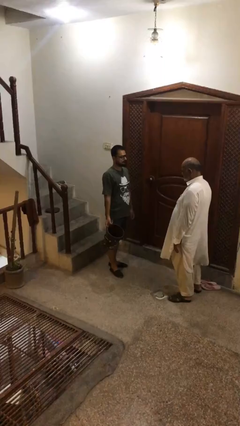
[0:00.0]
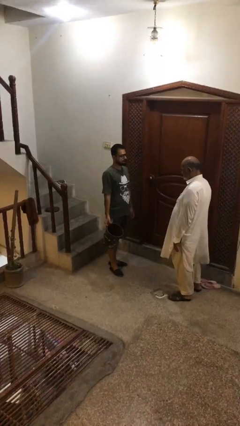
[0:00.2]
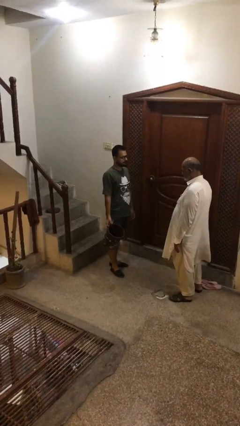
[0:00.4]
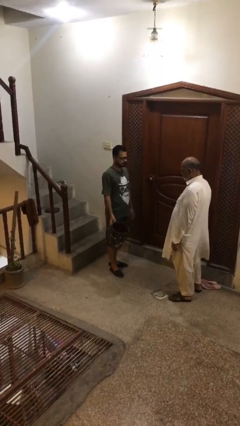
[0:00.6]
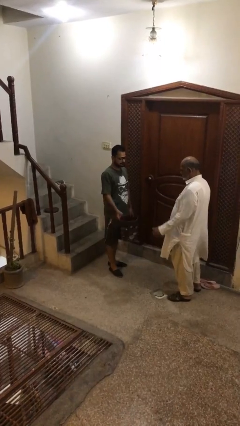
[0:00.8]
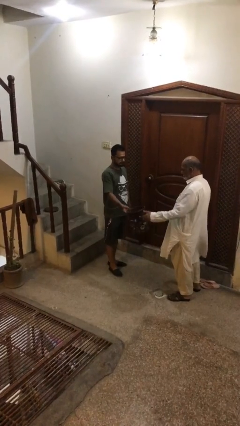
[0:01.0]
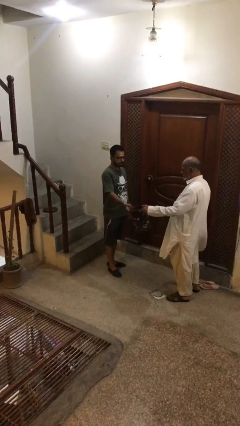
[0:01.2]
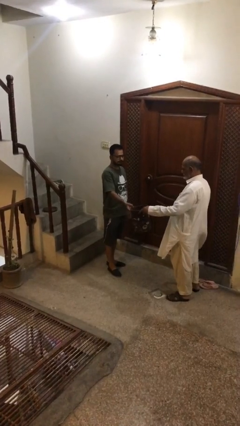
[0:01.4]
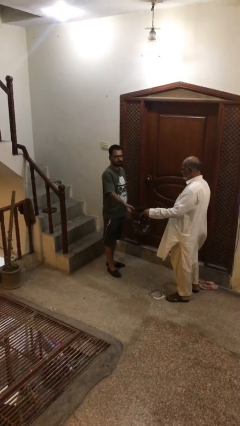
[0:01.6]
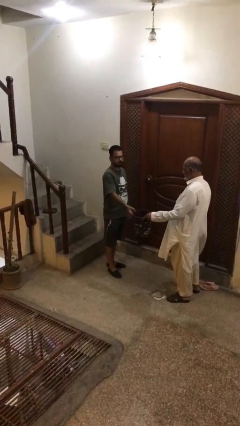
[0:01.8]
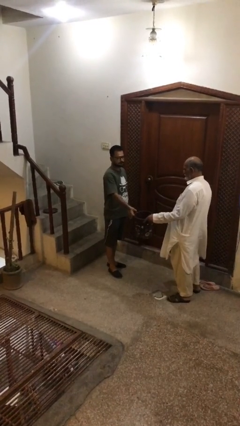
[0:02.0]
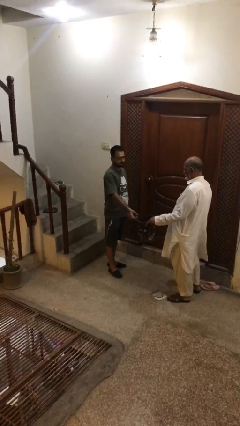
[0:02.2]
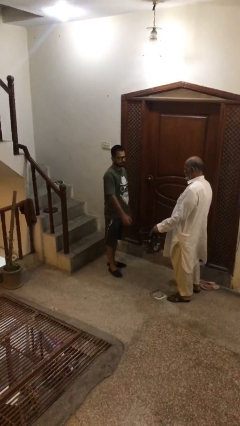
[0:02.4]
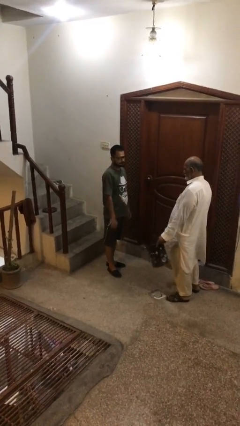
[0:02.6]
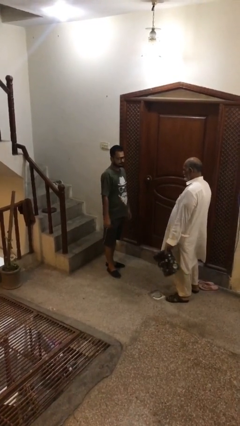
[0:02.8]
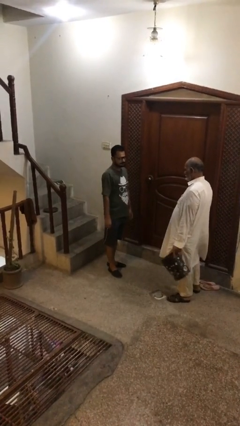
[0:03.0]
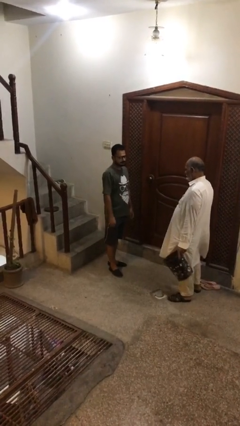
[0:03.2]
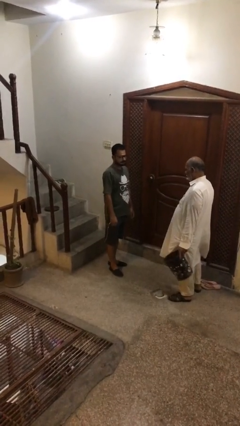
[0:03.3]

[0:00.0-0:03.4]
person transfers object to person

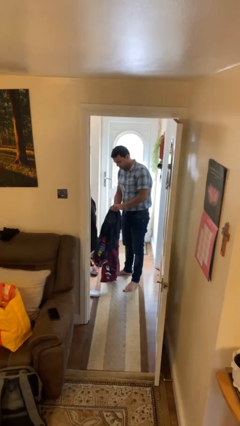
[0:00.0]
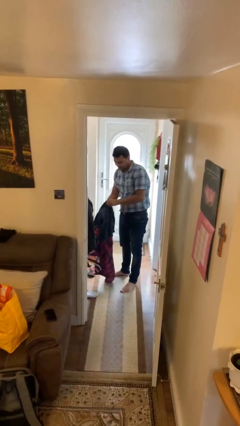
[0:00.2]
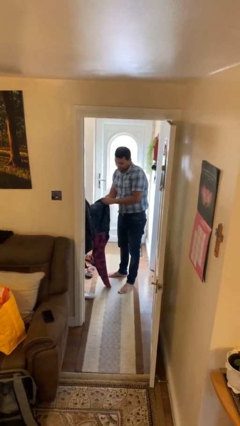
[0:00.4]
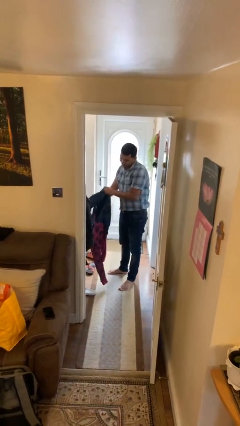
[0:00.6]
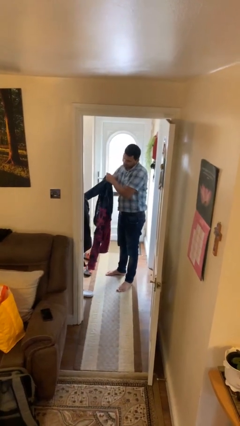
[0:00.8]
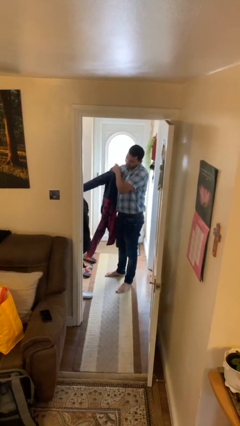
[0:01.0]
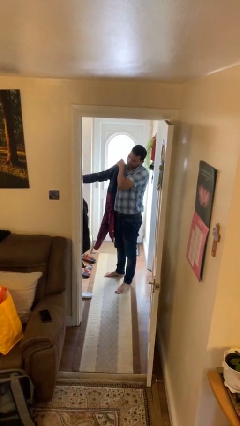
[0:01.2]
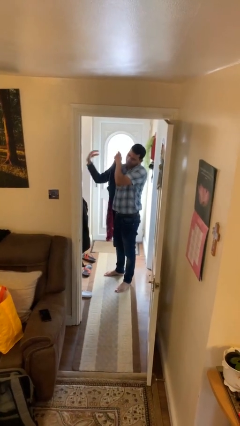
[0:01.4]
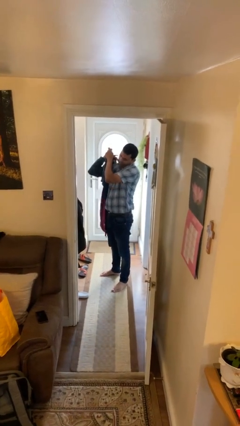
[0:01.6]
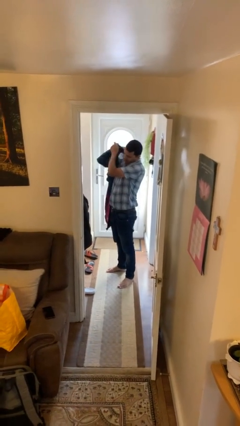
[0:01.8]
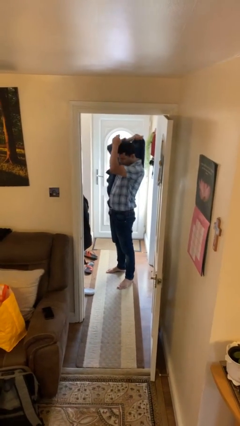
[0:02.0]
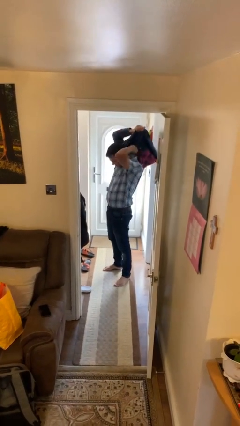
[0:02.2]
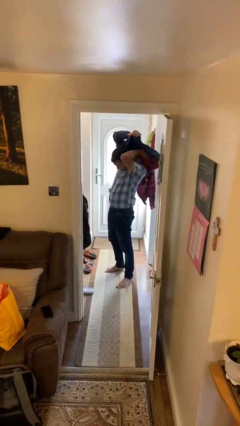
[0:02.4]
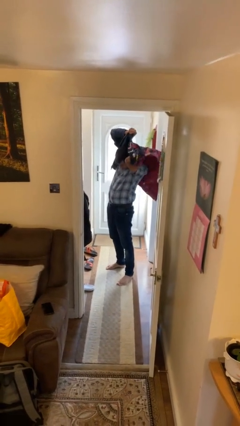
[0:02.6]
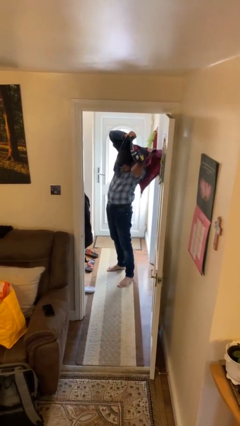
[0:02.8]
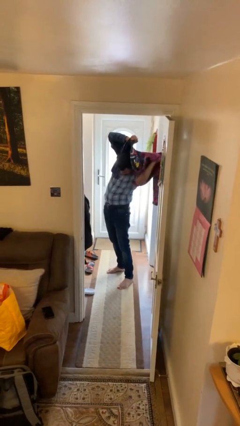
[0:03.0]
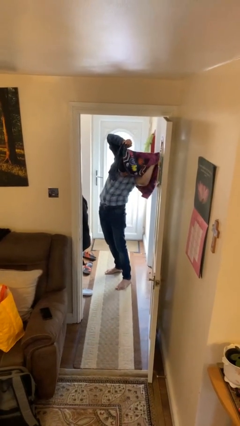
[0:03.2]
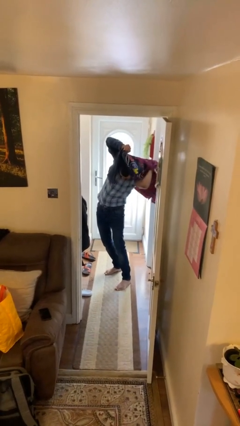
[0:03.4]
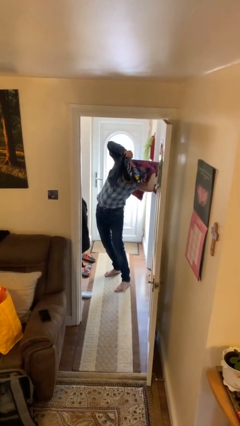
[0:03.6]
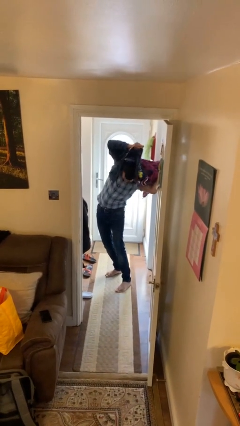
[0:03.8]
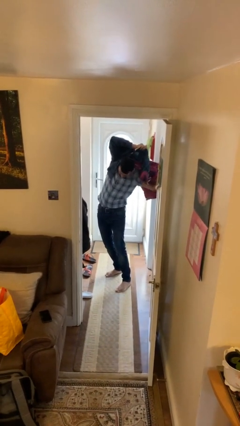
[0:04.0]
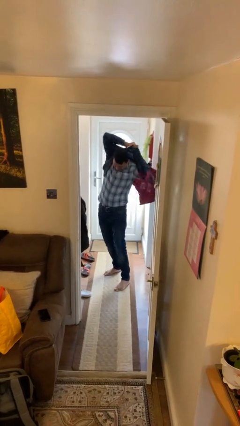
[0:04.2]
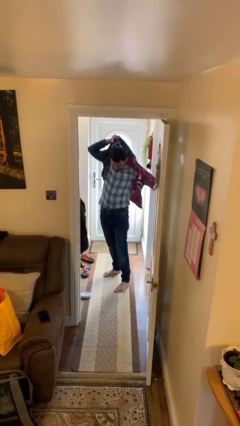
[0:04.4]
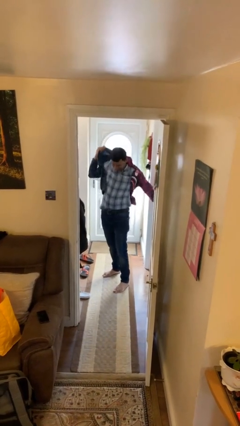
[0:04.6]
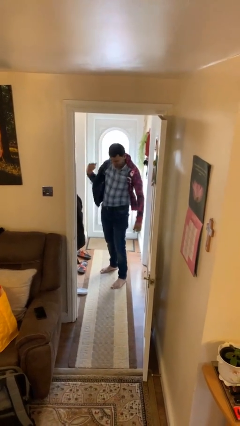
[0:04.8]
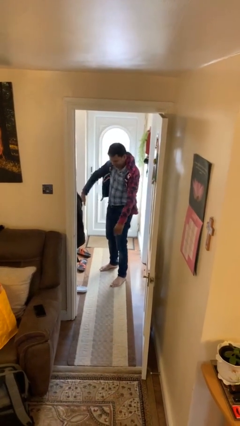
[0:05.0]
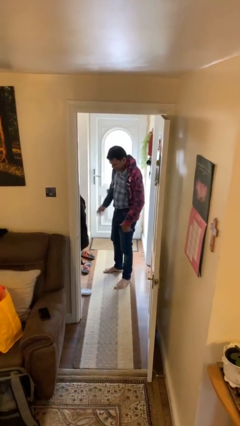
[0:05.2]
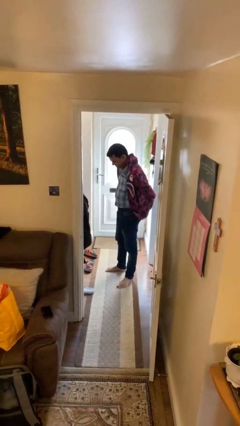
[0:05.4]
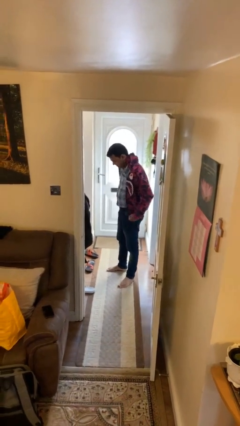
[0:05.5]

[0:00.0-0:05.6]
person puts on hoodie

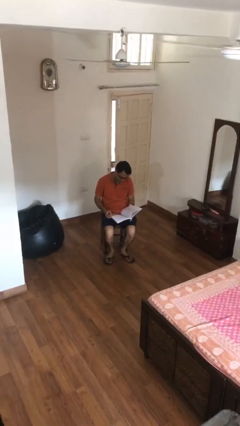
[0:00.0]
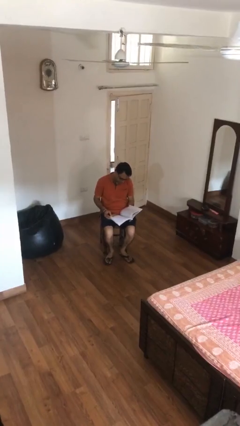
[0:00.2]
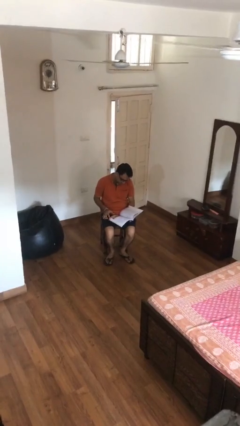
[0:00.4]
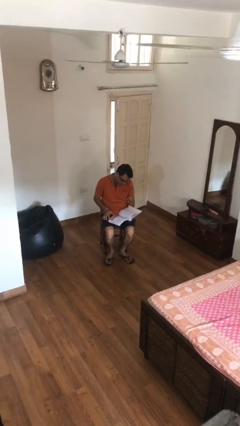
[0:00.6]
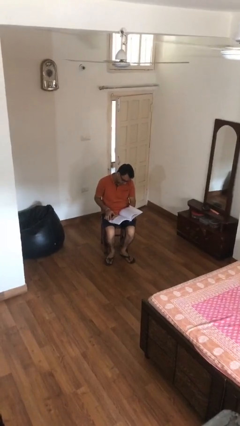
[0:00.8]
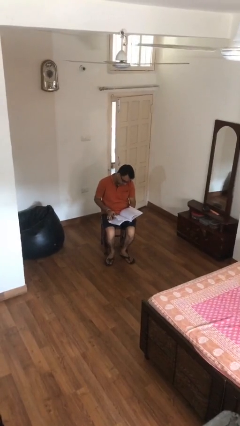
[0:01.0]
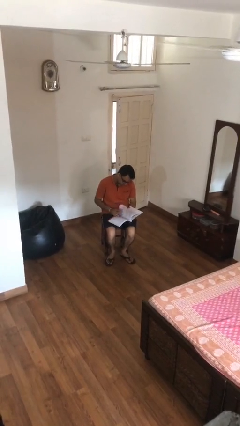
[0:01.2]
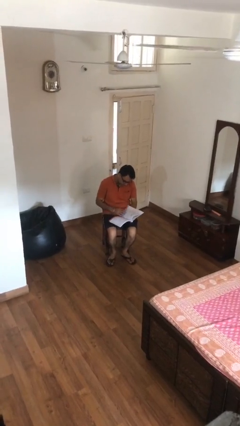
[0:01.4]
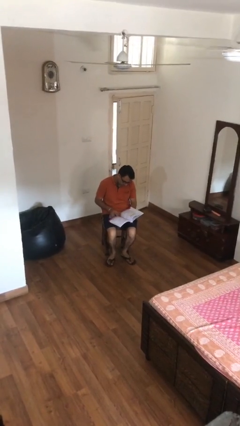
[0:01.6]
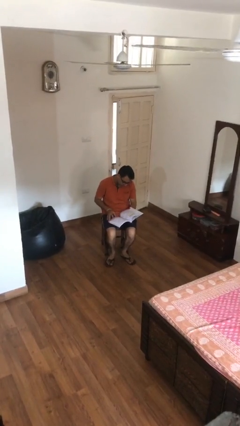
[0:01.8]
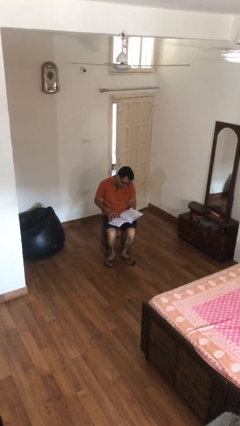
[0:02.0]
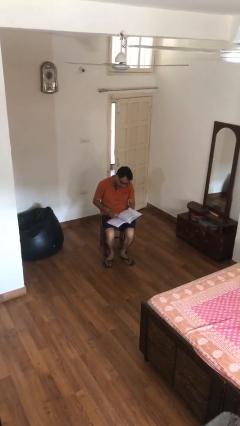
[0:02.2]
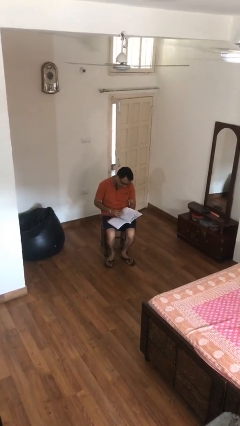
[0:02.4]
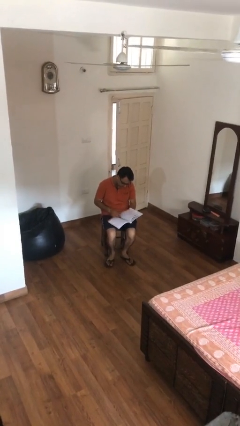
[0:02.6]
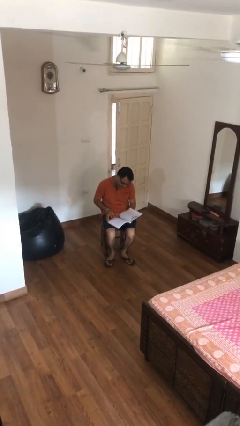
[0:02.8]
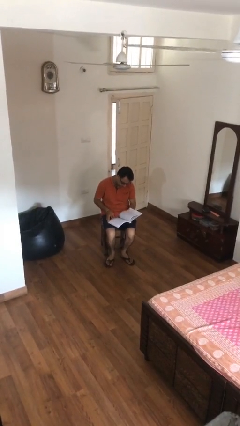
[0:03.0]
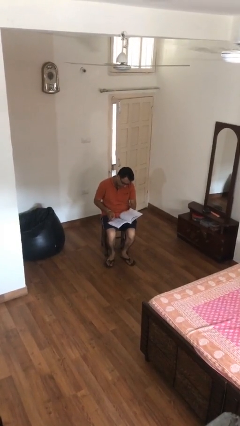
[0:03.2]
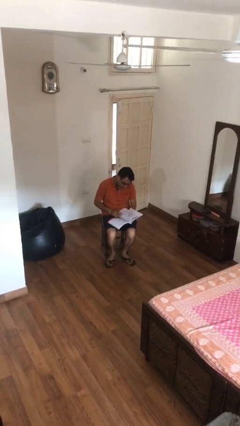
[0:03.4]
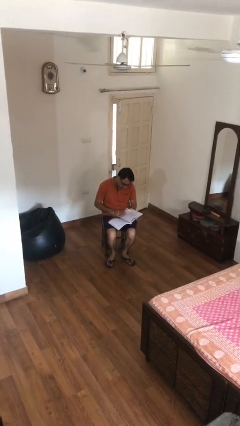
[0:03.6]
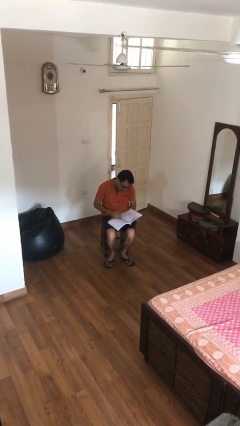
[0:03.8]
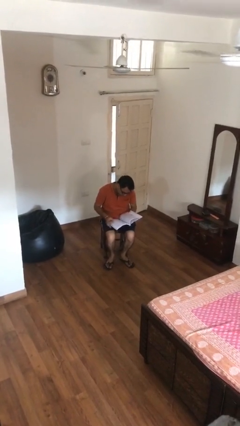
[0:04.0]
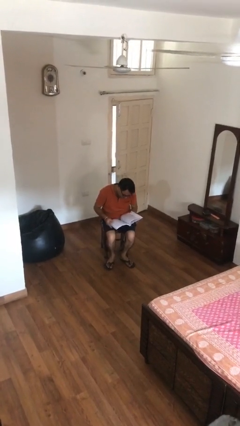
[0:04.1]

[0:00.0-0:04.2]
person reads document

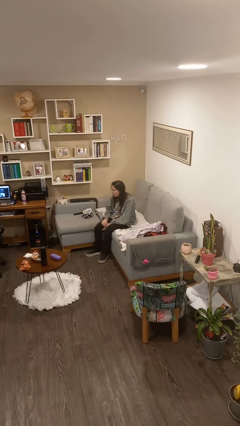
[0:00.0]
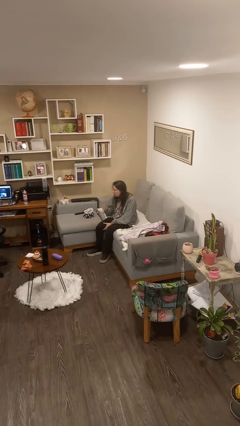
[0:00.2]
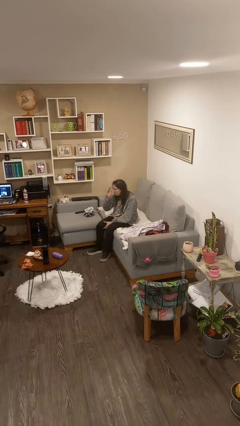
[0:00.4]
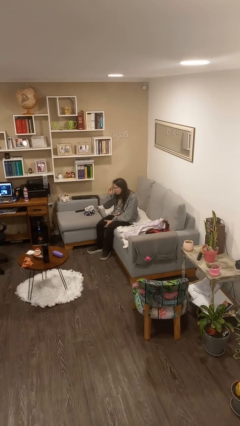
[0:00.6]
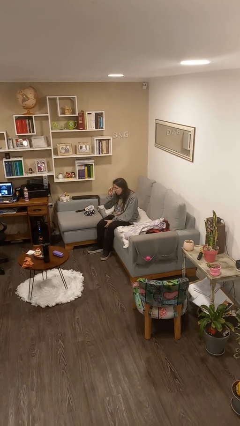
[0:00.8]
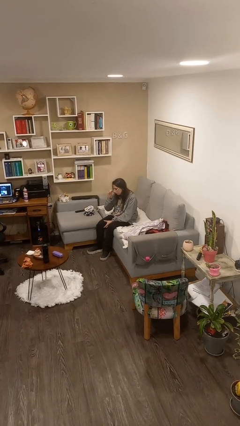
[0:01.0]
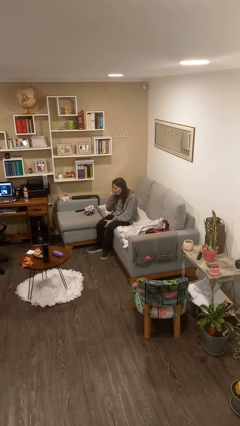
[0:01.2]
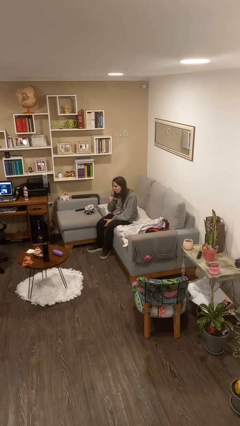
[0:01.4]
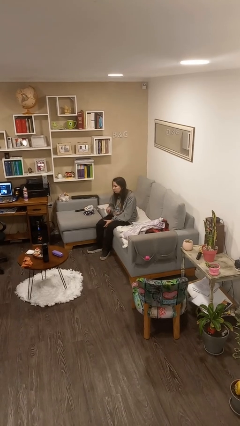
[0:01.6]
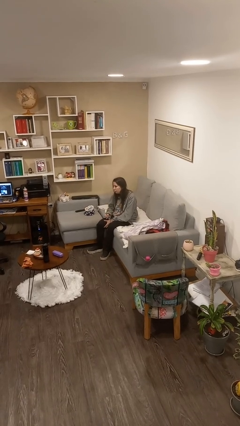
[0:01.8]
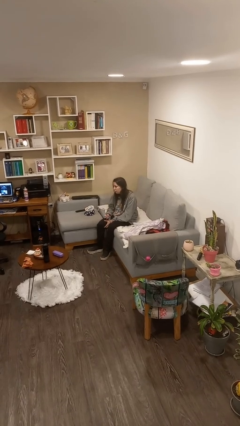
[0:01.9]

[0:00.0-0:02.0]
person takes off glasses

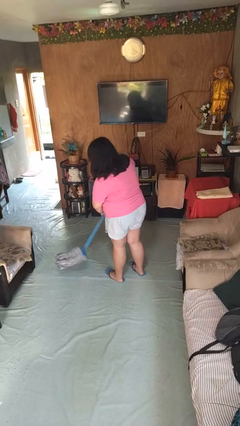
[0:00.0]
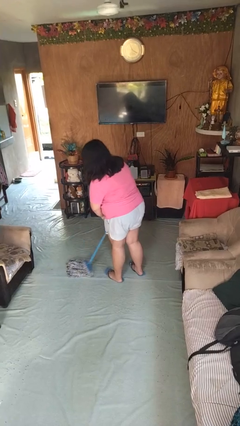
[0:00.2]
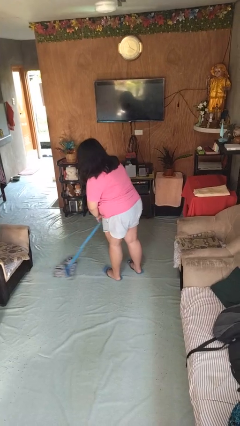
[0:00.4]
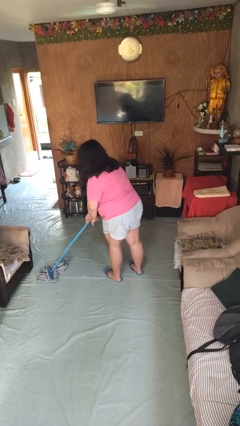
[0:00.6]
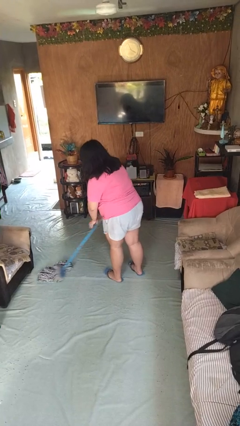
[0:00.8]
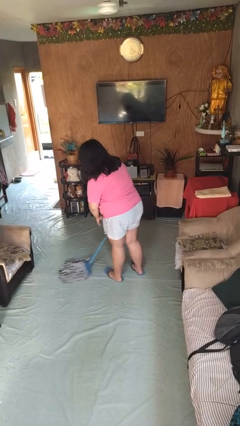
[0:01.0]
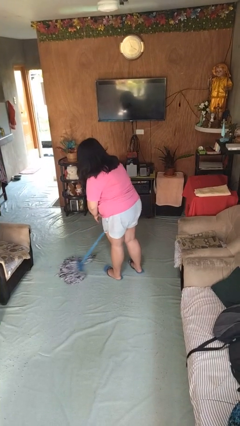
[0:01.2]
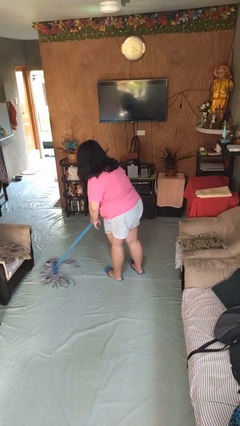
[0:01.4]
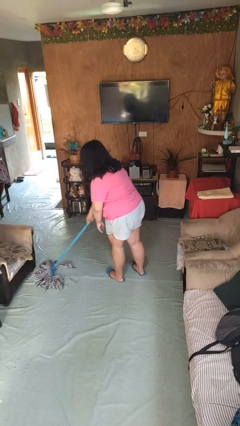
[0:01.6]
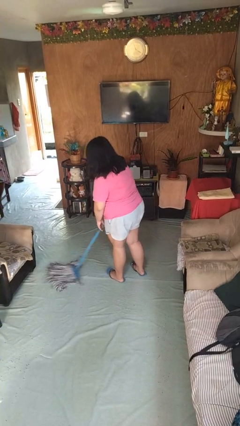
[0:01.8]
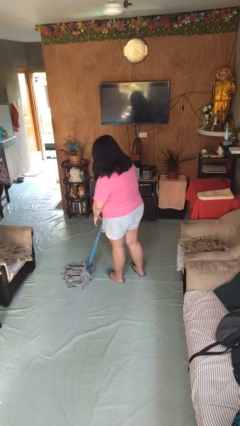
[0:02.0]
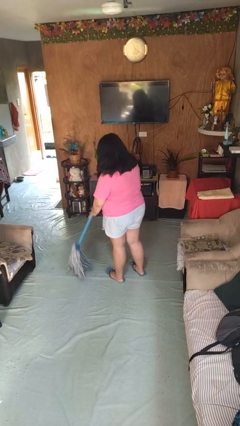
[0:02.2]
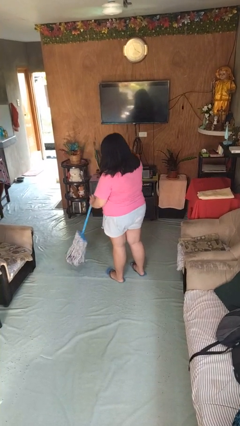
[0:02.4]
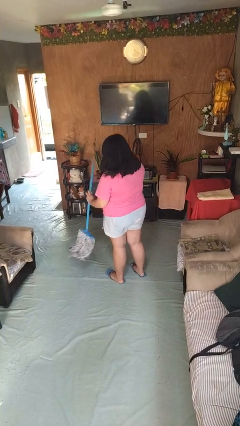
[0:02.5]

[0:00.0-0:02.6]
person mops
